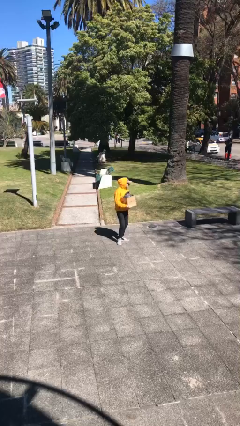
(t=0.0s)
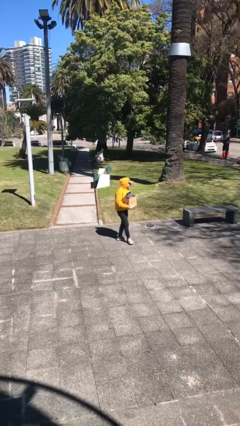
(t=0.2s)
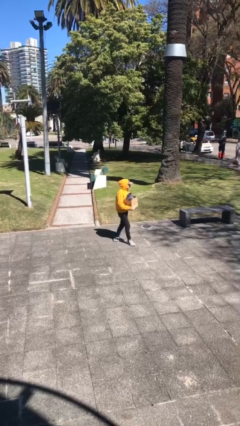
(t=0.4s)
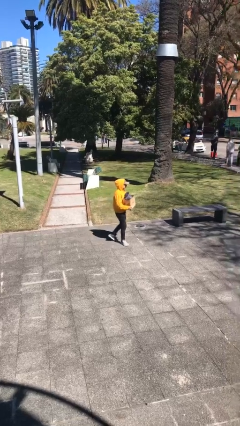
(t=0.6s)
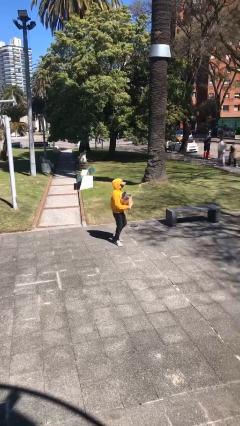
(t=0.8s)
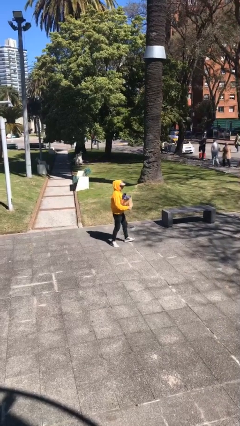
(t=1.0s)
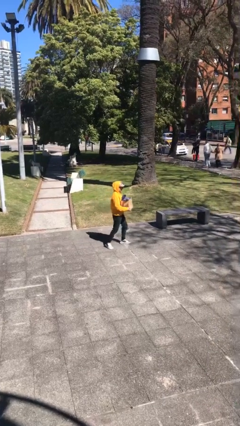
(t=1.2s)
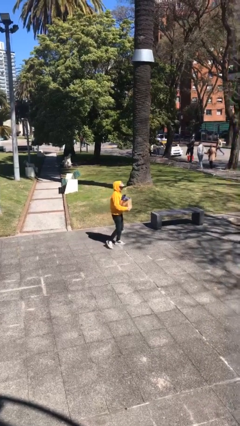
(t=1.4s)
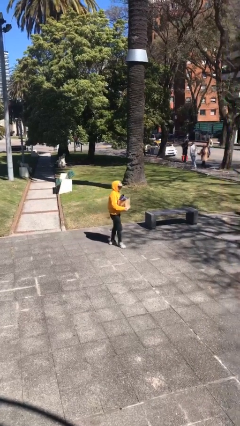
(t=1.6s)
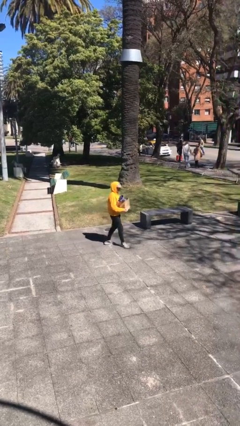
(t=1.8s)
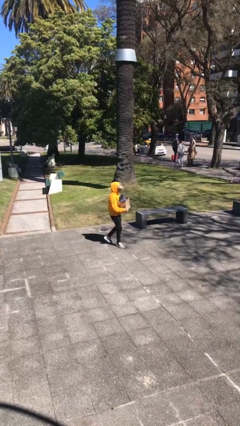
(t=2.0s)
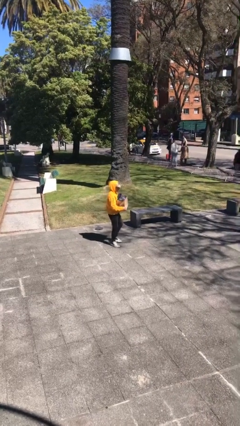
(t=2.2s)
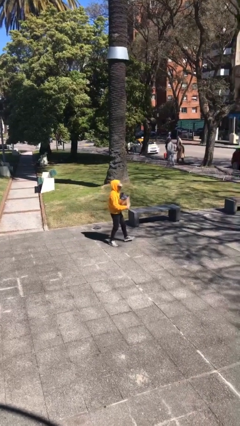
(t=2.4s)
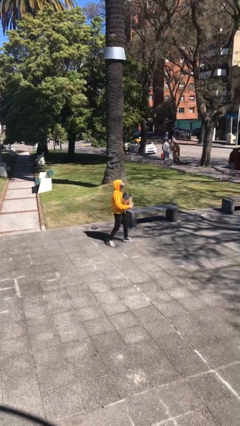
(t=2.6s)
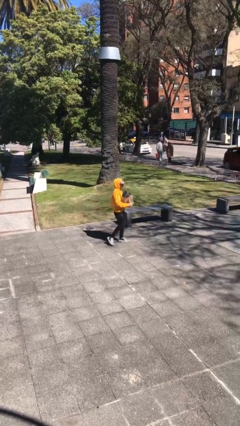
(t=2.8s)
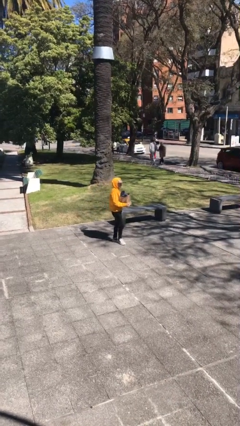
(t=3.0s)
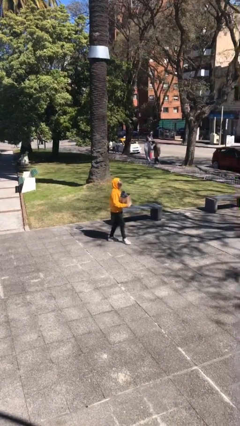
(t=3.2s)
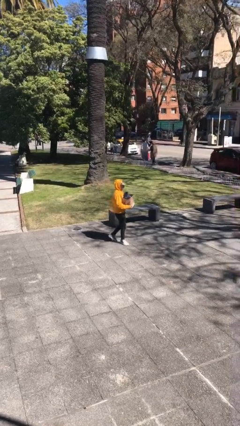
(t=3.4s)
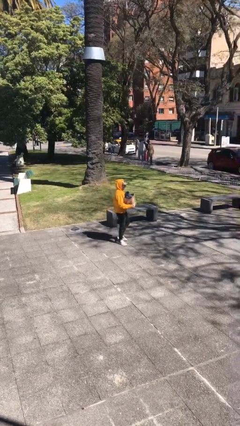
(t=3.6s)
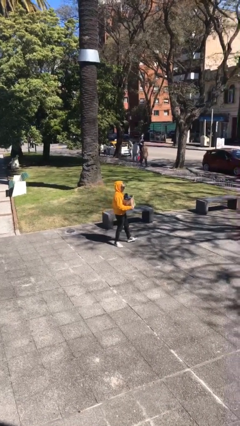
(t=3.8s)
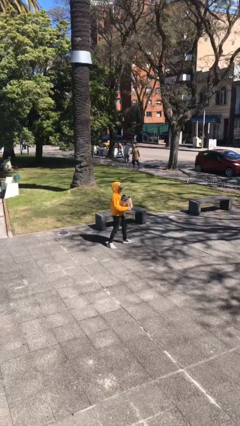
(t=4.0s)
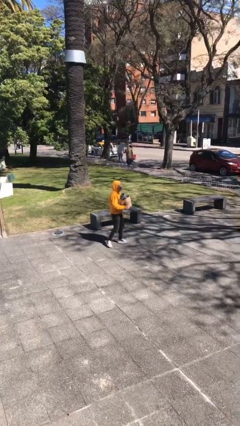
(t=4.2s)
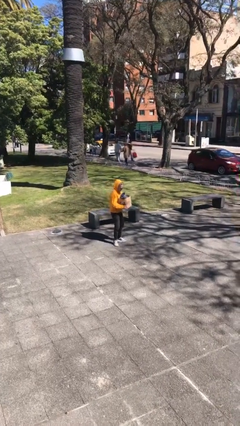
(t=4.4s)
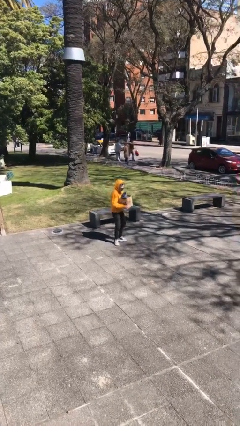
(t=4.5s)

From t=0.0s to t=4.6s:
person carries heavy object

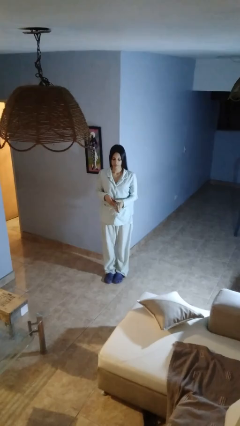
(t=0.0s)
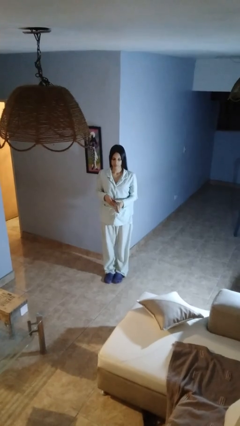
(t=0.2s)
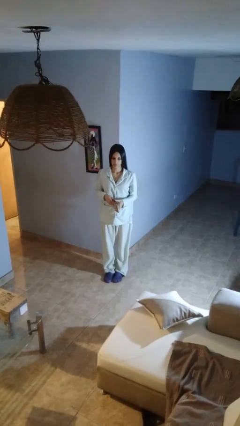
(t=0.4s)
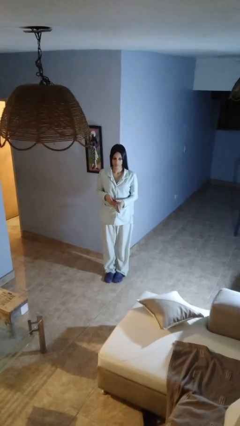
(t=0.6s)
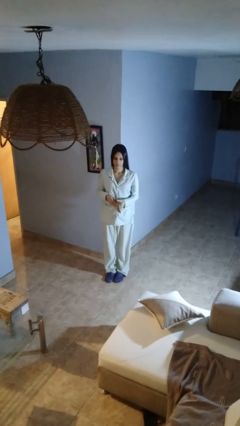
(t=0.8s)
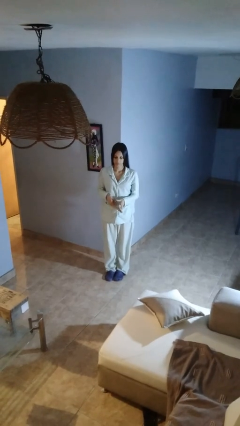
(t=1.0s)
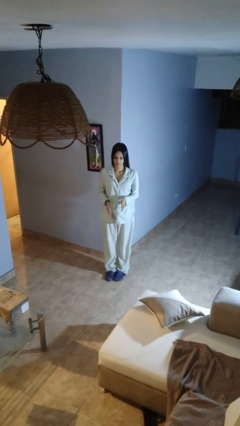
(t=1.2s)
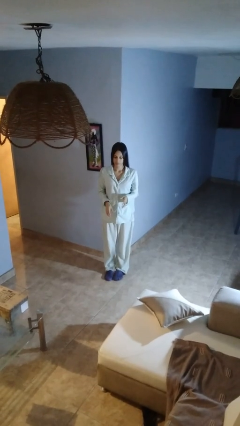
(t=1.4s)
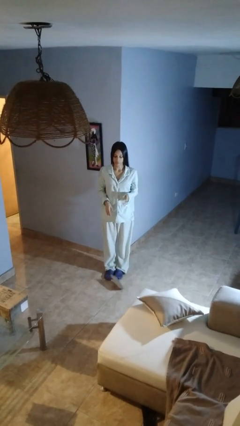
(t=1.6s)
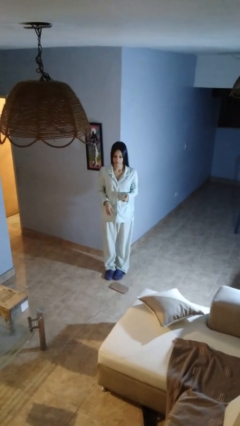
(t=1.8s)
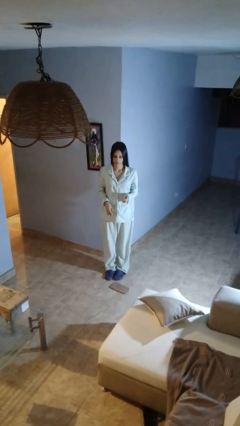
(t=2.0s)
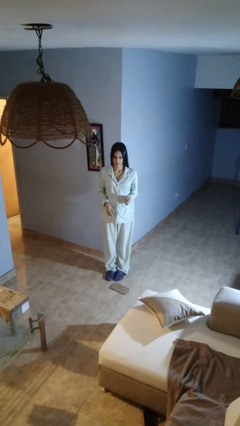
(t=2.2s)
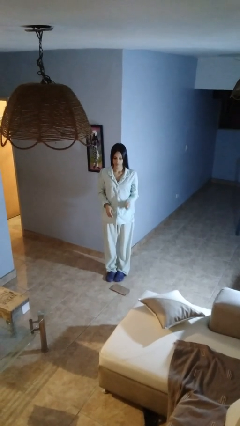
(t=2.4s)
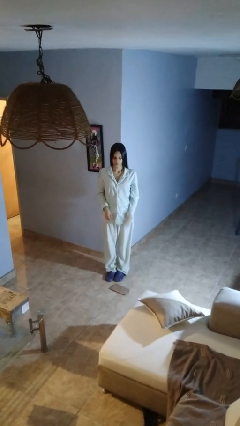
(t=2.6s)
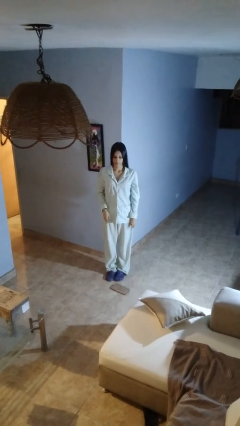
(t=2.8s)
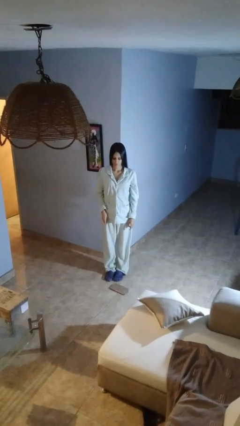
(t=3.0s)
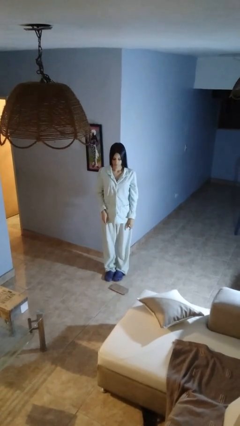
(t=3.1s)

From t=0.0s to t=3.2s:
person drops object

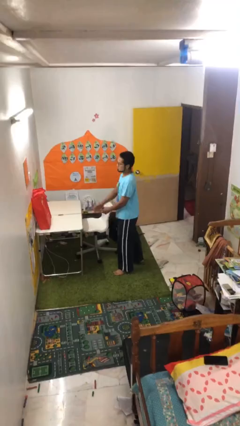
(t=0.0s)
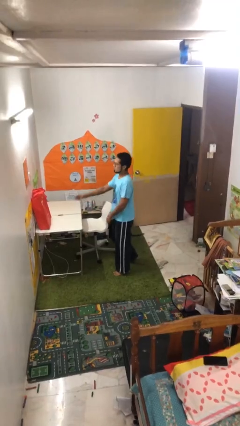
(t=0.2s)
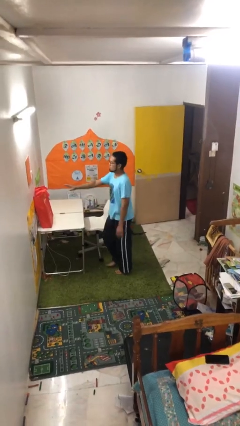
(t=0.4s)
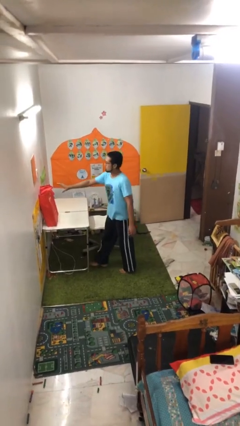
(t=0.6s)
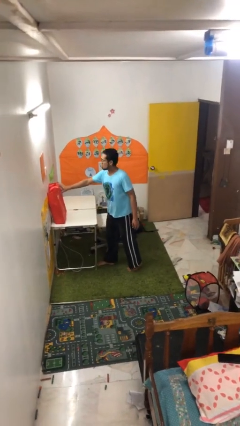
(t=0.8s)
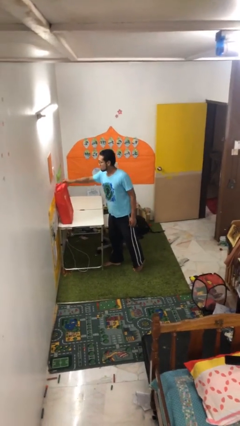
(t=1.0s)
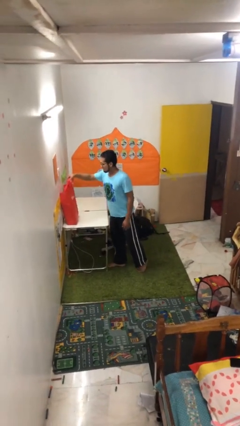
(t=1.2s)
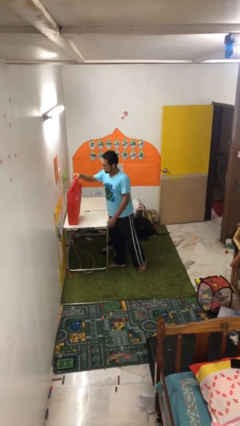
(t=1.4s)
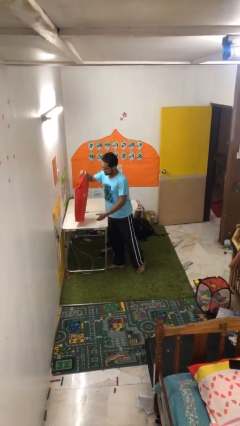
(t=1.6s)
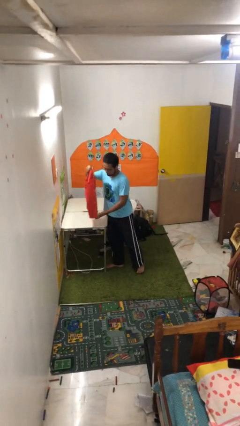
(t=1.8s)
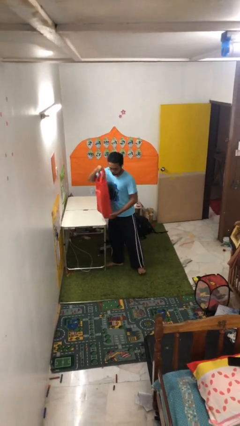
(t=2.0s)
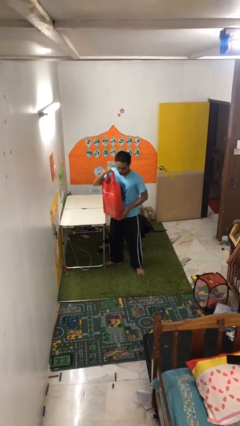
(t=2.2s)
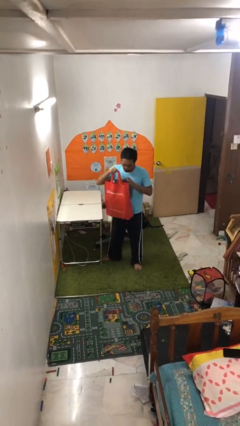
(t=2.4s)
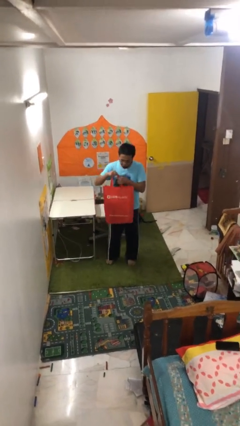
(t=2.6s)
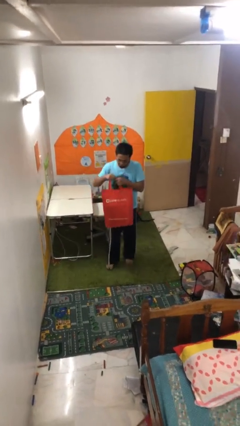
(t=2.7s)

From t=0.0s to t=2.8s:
person picks up object from table

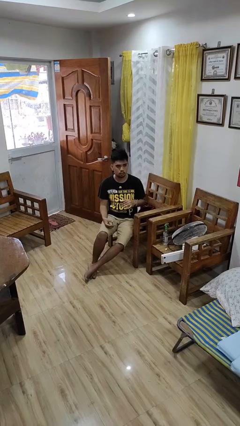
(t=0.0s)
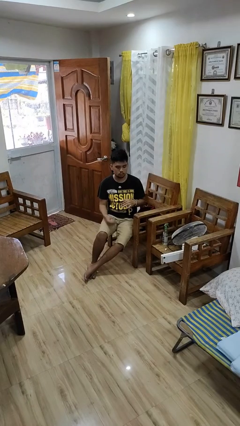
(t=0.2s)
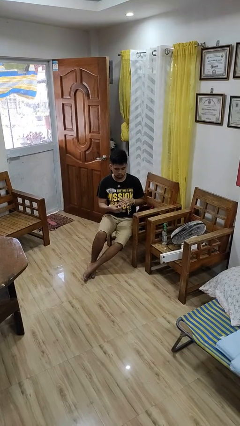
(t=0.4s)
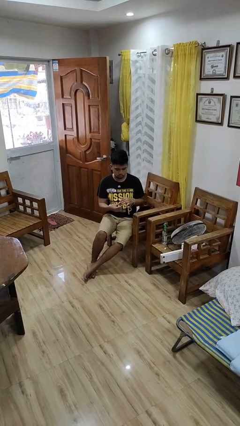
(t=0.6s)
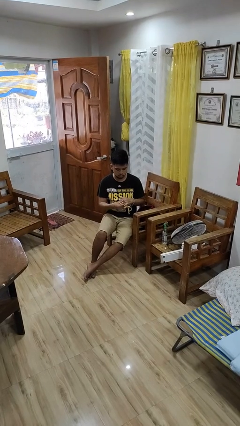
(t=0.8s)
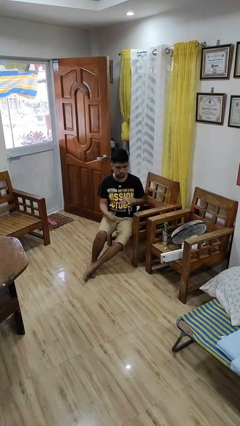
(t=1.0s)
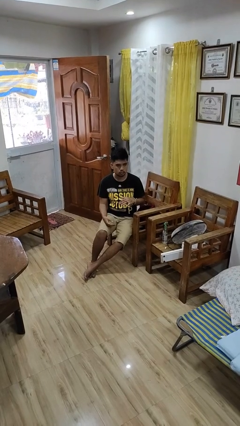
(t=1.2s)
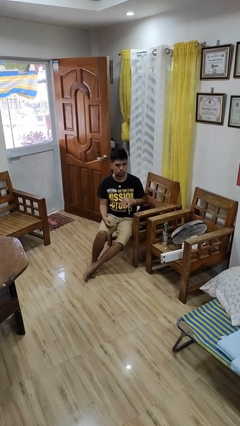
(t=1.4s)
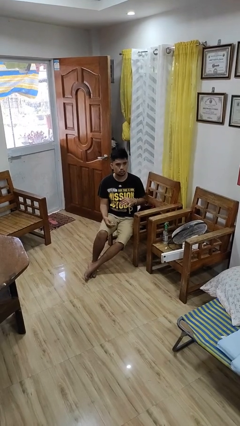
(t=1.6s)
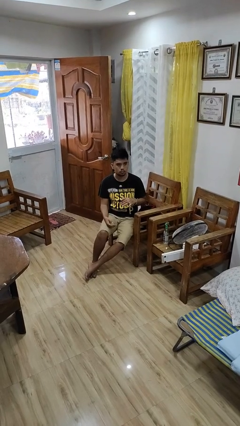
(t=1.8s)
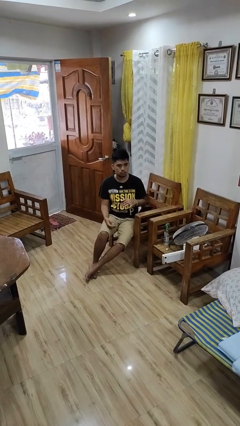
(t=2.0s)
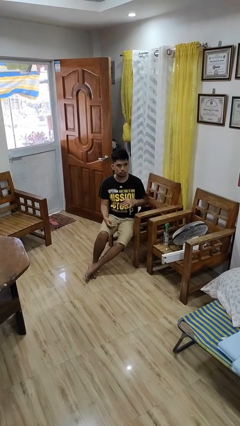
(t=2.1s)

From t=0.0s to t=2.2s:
person puts on ring

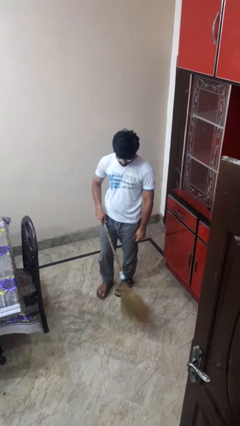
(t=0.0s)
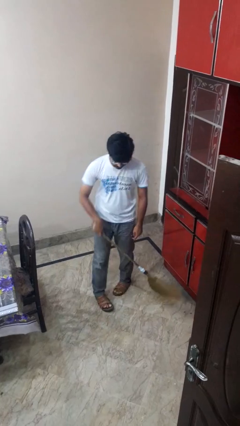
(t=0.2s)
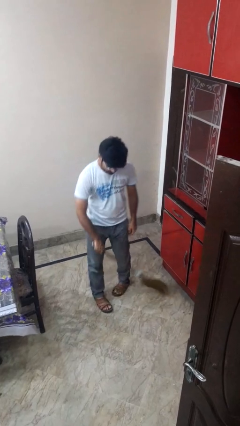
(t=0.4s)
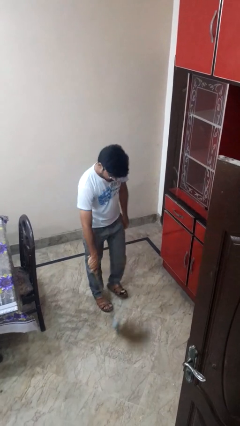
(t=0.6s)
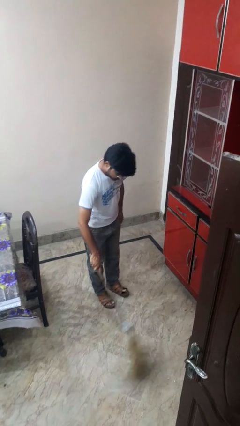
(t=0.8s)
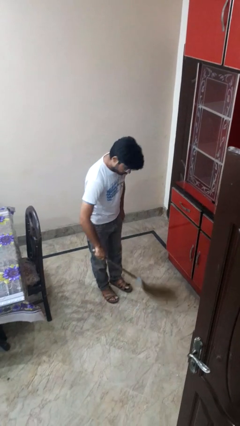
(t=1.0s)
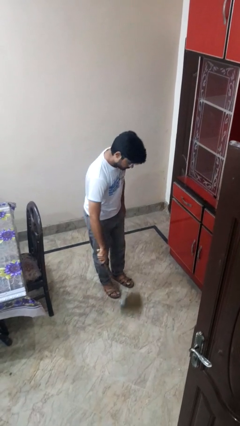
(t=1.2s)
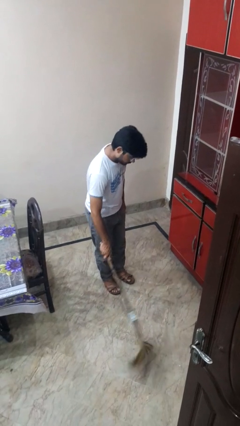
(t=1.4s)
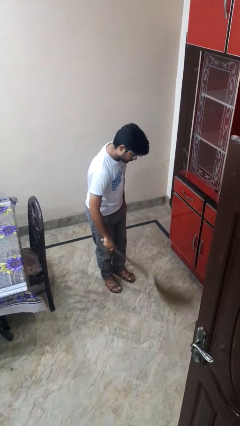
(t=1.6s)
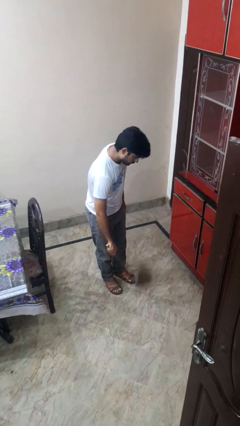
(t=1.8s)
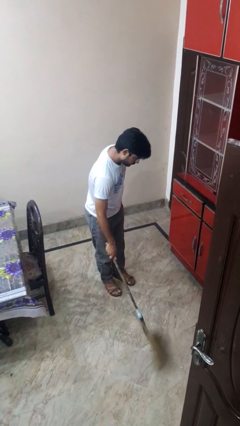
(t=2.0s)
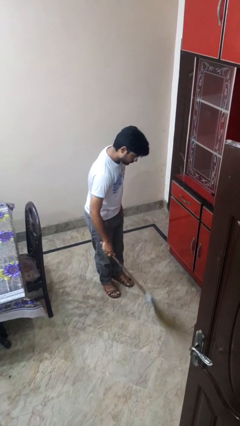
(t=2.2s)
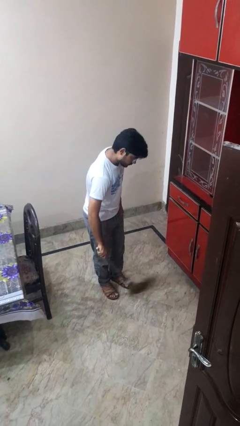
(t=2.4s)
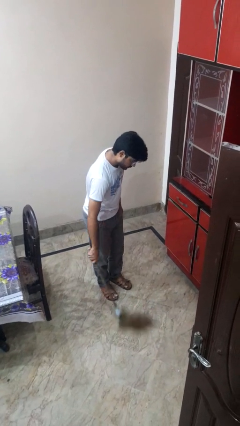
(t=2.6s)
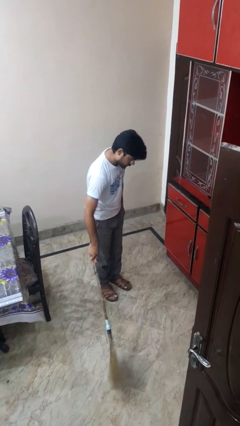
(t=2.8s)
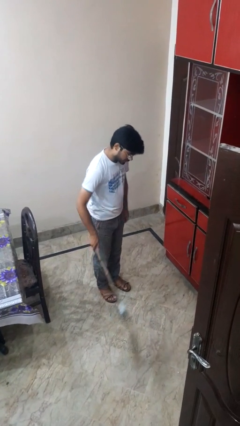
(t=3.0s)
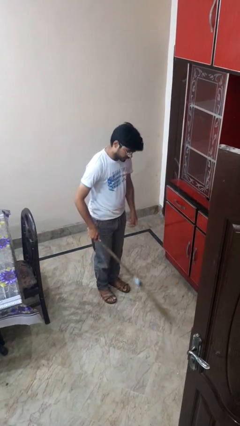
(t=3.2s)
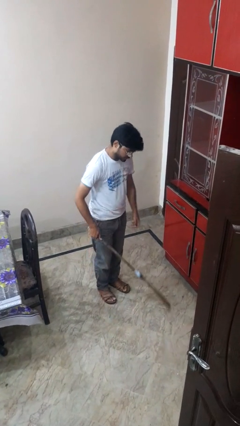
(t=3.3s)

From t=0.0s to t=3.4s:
person sweeps floor

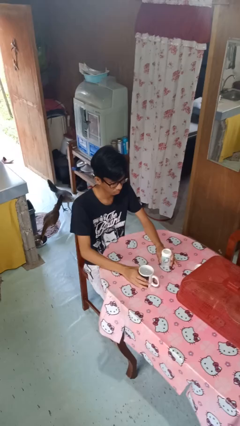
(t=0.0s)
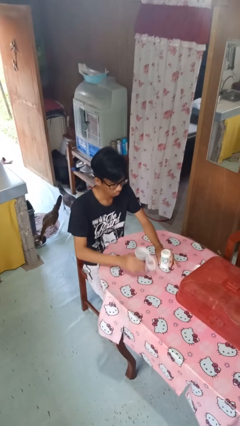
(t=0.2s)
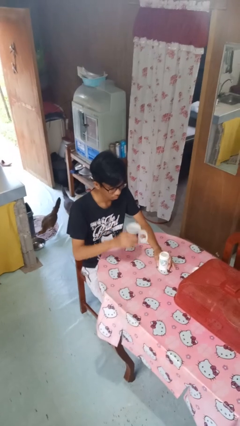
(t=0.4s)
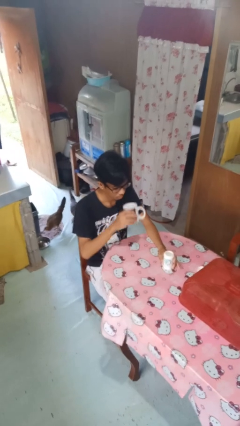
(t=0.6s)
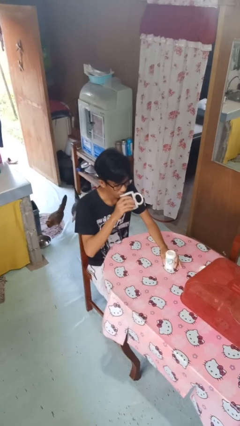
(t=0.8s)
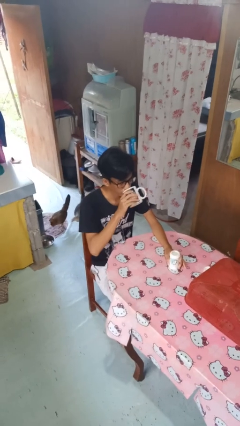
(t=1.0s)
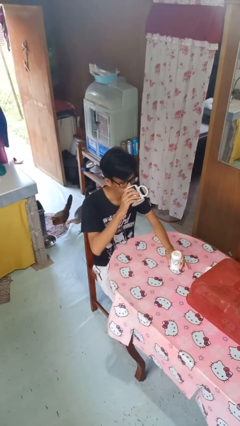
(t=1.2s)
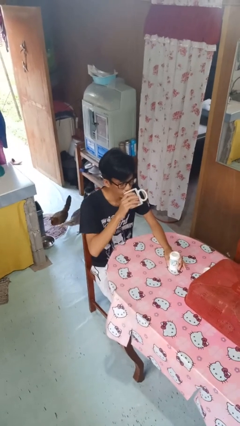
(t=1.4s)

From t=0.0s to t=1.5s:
person drinks from cup
